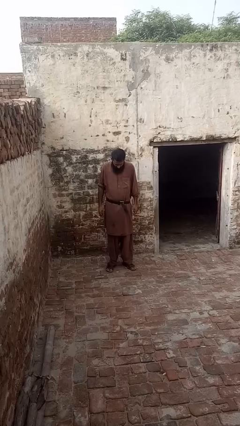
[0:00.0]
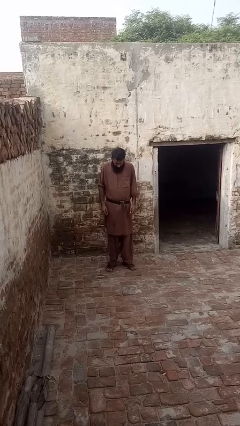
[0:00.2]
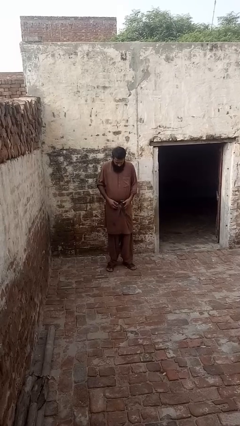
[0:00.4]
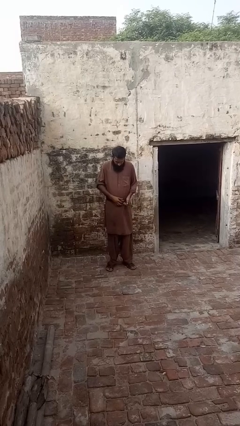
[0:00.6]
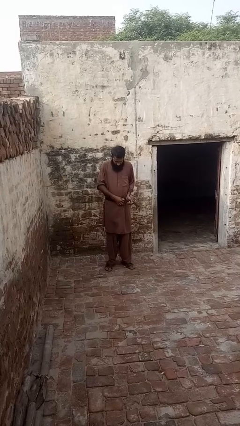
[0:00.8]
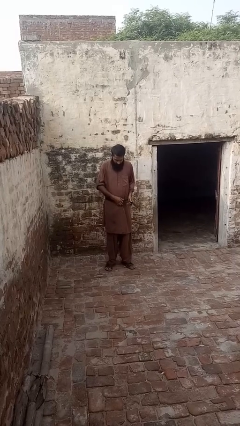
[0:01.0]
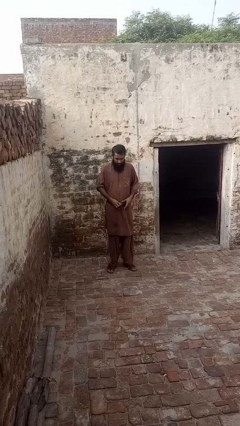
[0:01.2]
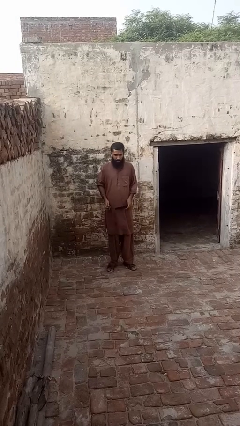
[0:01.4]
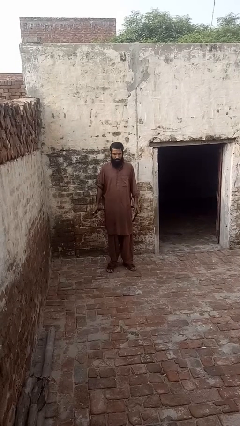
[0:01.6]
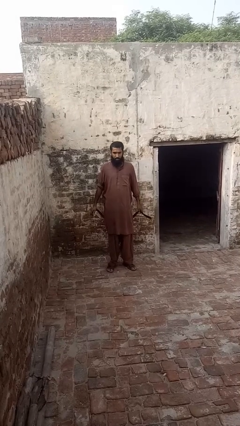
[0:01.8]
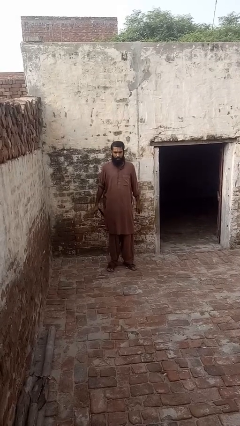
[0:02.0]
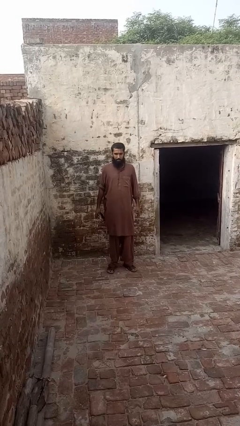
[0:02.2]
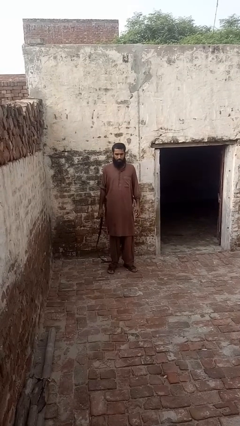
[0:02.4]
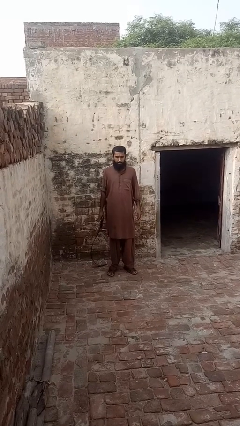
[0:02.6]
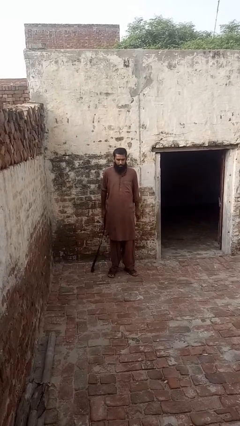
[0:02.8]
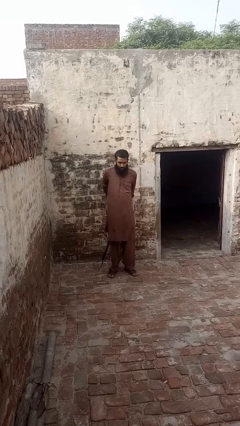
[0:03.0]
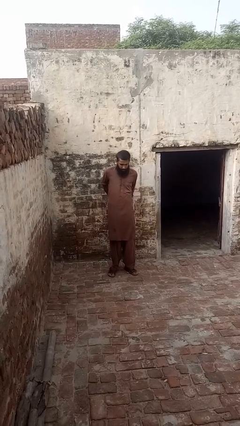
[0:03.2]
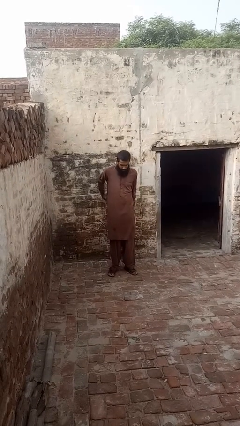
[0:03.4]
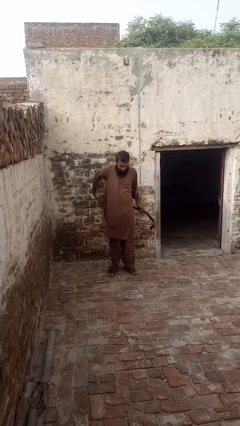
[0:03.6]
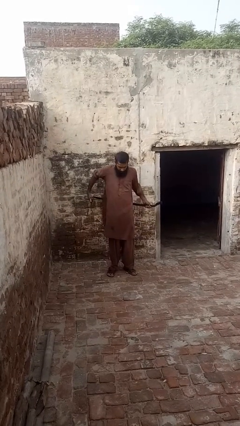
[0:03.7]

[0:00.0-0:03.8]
person takes off belt

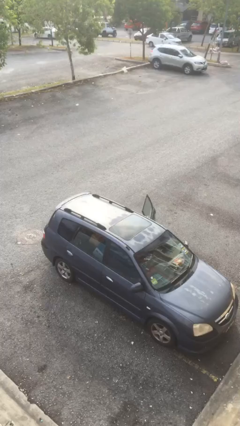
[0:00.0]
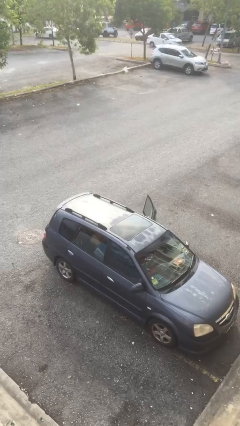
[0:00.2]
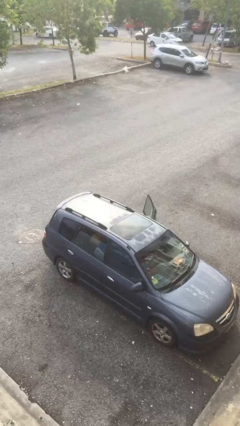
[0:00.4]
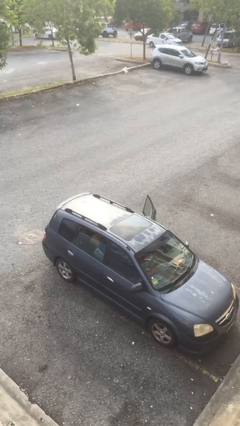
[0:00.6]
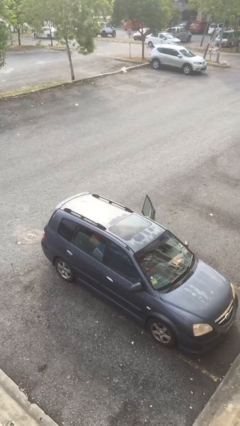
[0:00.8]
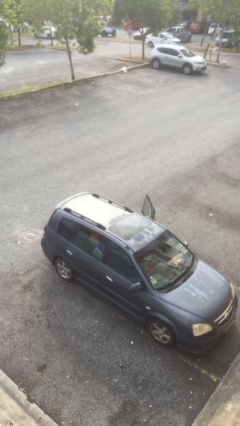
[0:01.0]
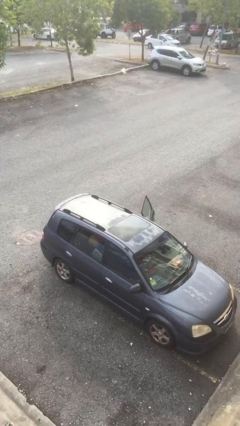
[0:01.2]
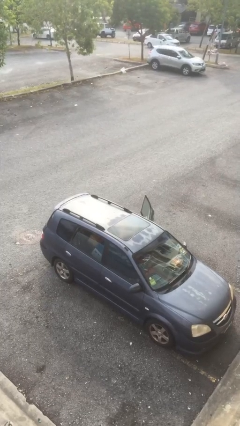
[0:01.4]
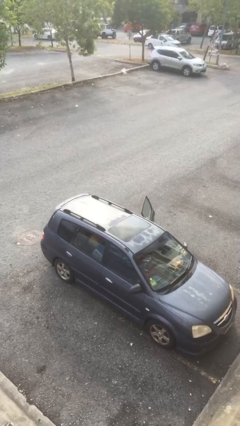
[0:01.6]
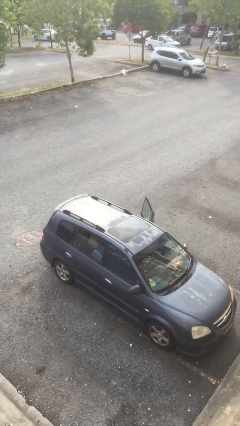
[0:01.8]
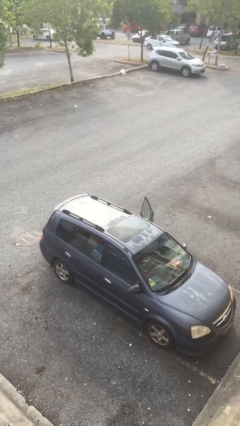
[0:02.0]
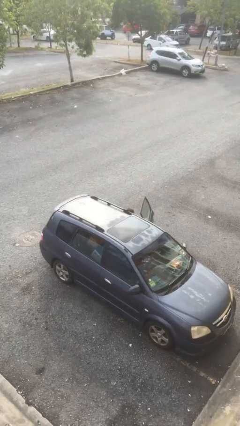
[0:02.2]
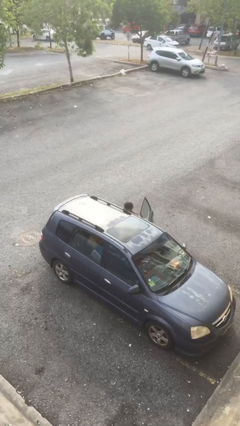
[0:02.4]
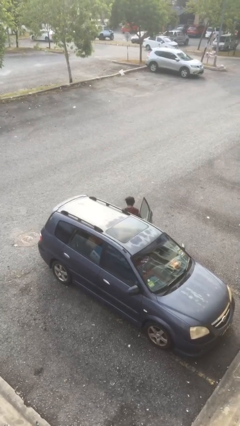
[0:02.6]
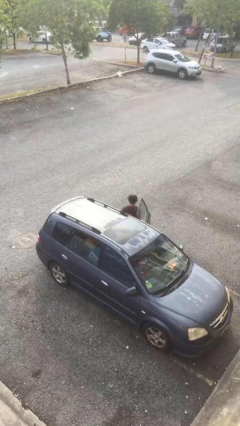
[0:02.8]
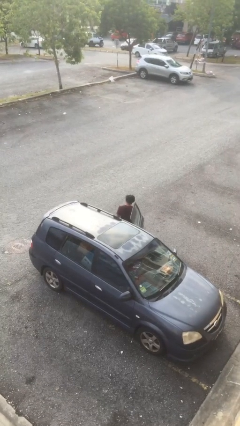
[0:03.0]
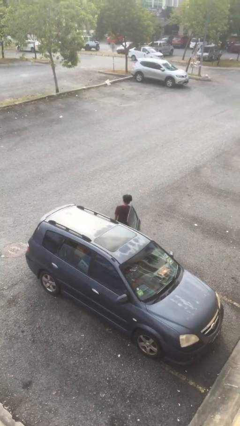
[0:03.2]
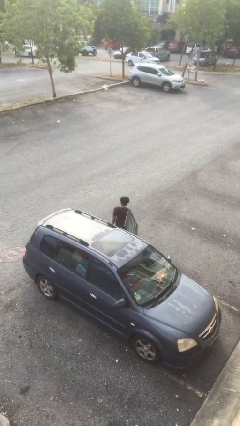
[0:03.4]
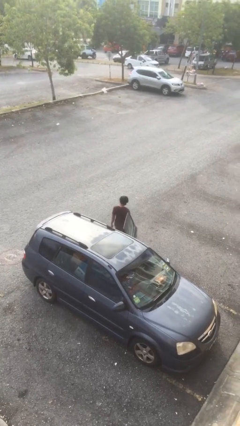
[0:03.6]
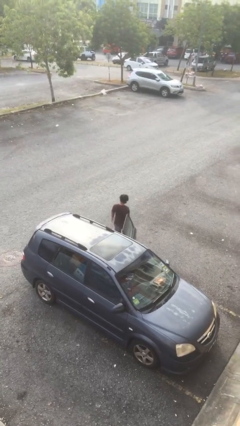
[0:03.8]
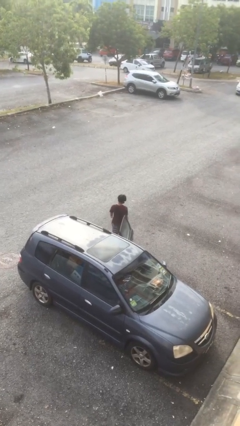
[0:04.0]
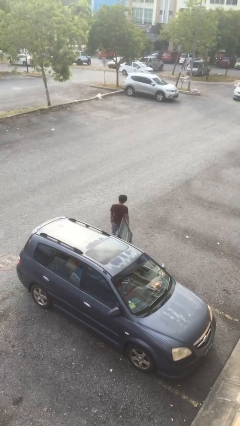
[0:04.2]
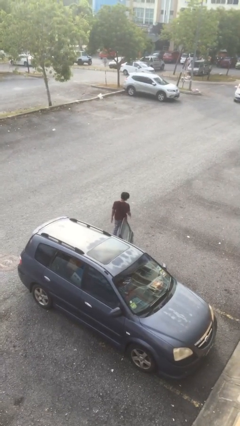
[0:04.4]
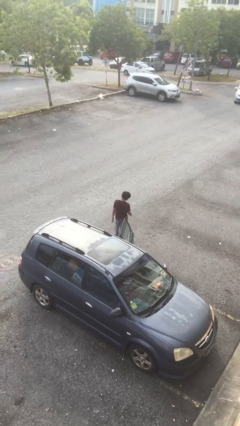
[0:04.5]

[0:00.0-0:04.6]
person exits car

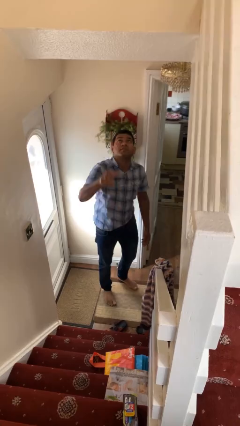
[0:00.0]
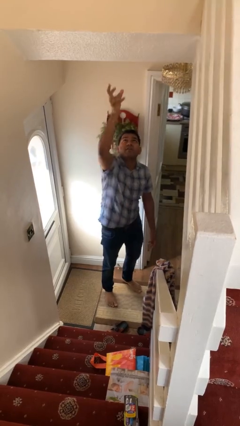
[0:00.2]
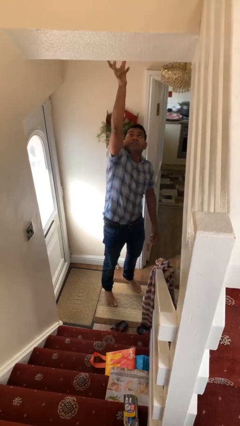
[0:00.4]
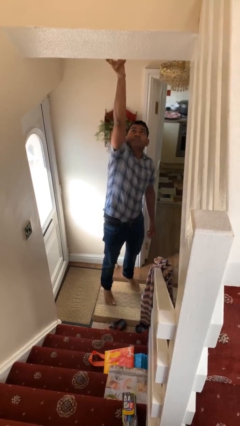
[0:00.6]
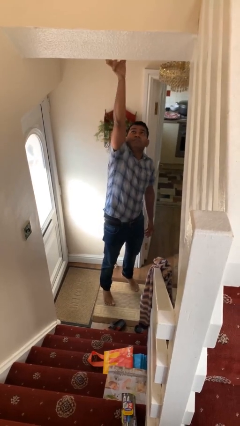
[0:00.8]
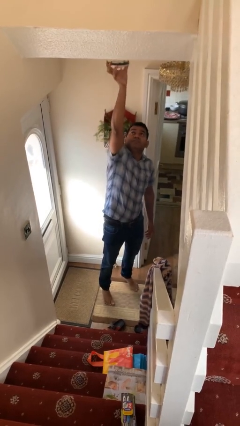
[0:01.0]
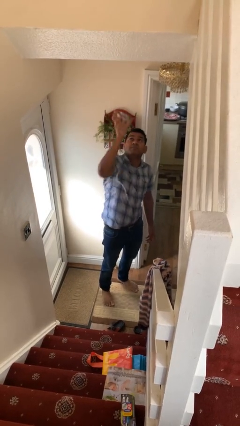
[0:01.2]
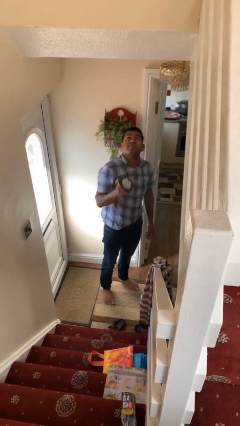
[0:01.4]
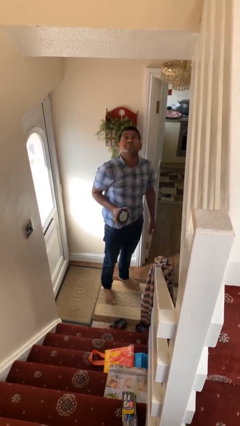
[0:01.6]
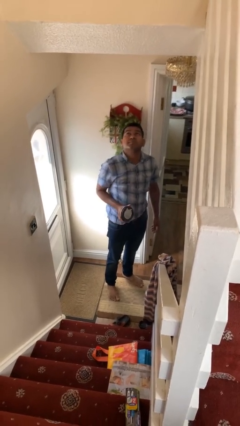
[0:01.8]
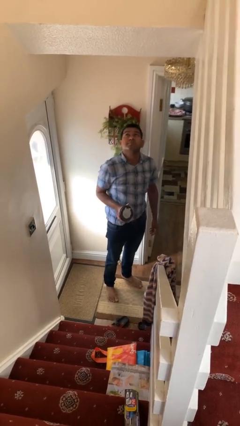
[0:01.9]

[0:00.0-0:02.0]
person takes down smoke detector

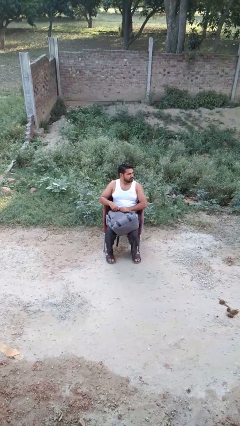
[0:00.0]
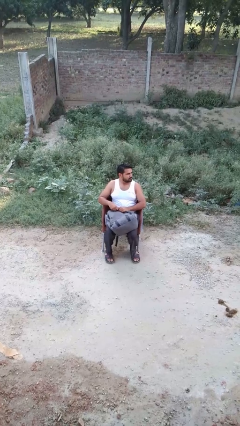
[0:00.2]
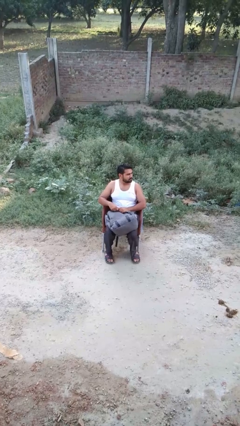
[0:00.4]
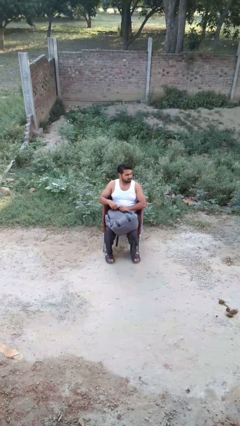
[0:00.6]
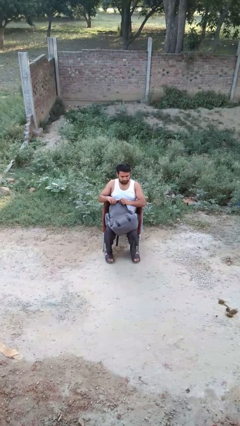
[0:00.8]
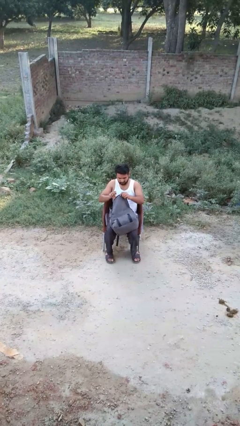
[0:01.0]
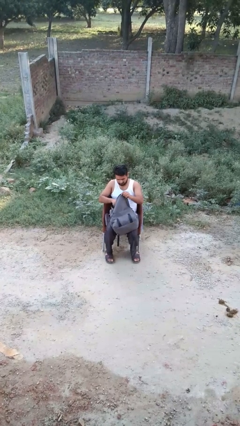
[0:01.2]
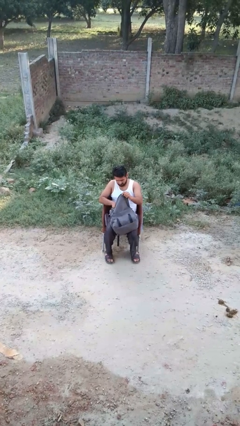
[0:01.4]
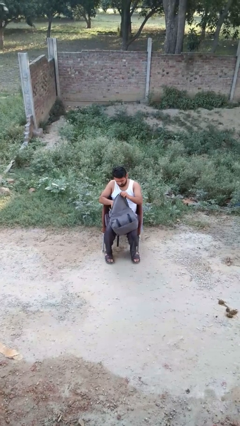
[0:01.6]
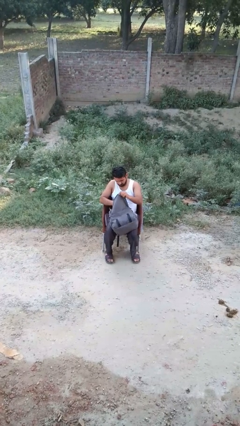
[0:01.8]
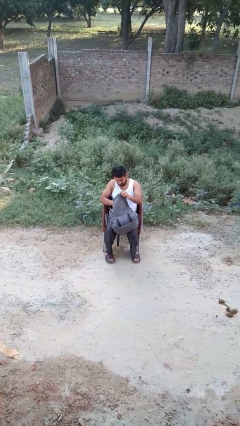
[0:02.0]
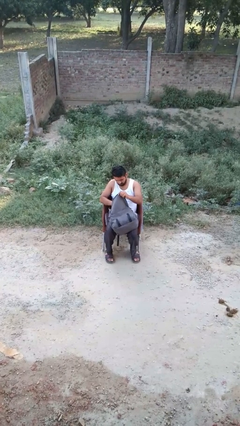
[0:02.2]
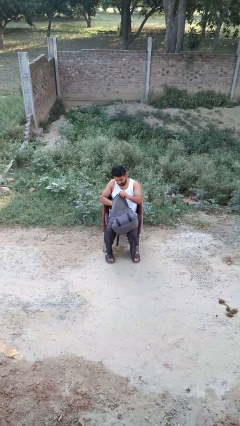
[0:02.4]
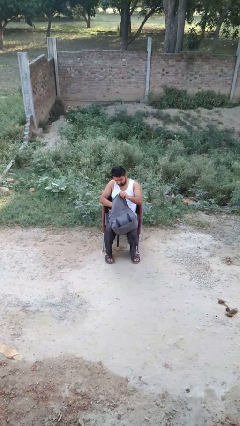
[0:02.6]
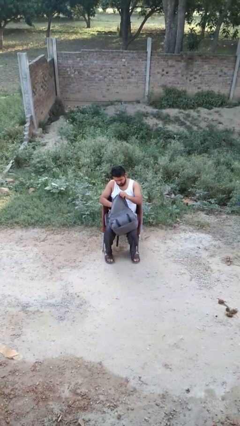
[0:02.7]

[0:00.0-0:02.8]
person searches in backpack

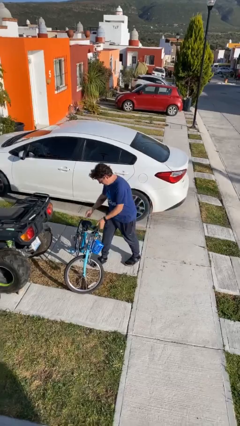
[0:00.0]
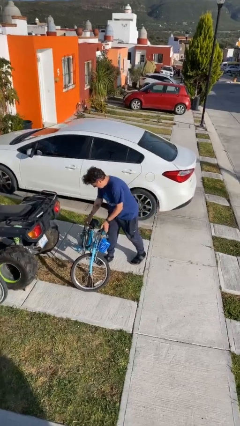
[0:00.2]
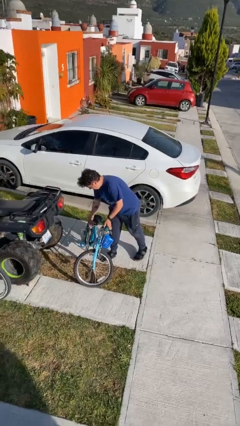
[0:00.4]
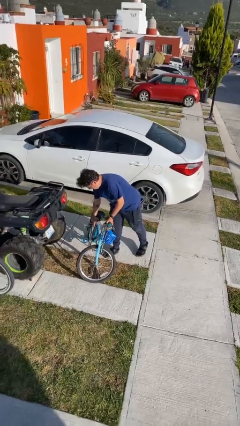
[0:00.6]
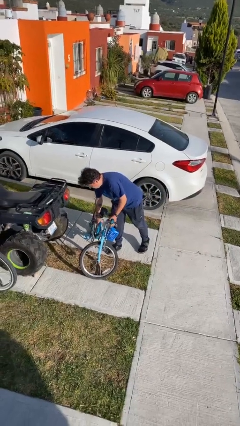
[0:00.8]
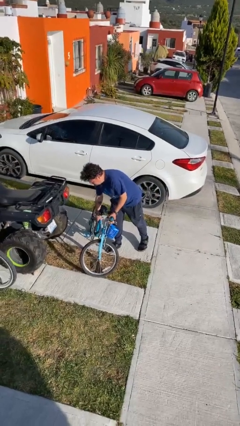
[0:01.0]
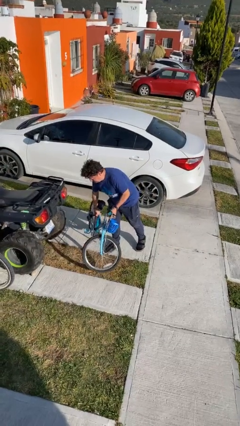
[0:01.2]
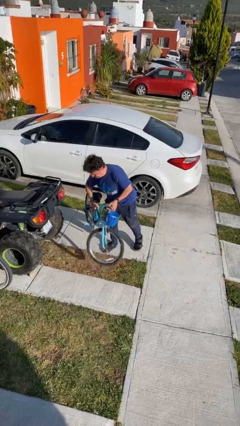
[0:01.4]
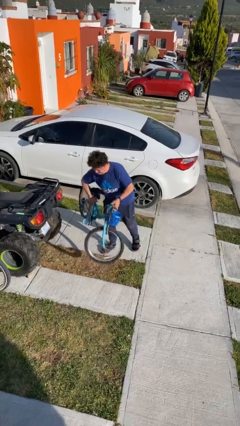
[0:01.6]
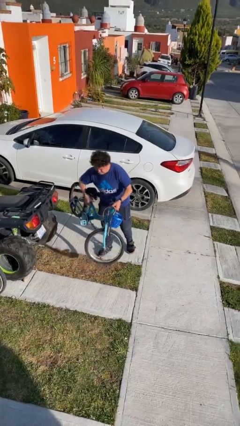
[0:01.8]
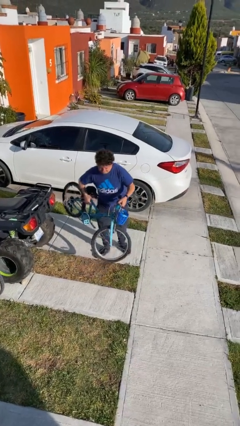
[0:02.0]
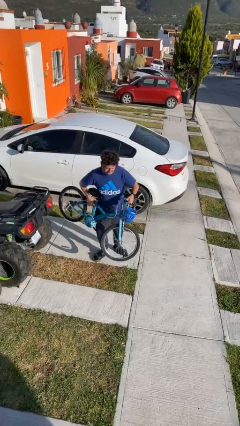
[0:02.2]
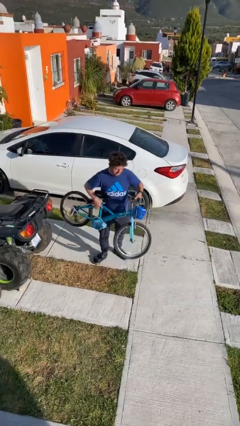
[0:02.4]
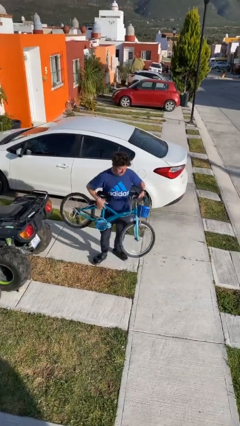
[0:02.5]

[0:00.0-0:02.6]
person picks up object from floor

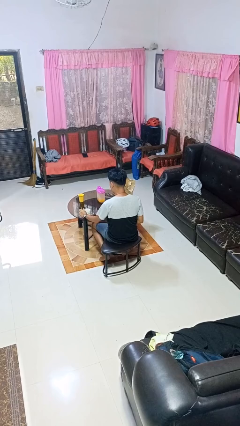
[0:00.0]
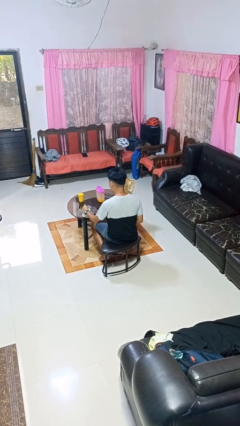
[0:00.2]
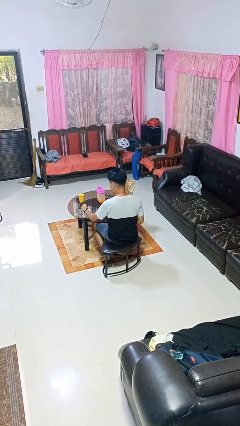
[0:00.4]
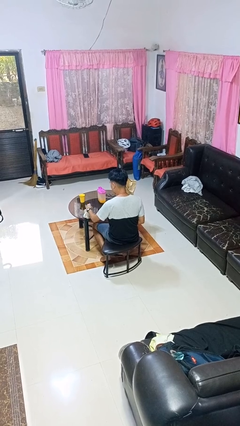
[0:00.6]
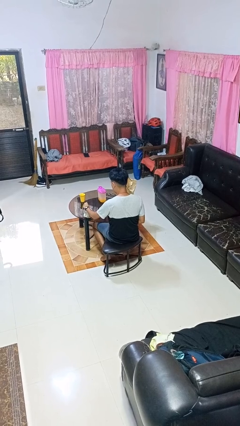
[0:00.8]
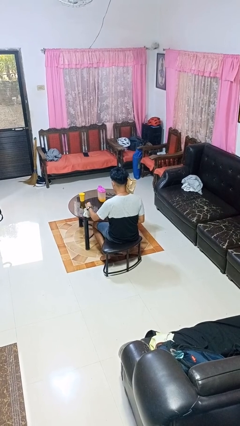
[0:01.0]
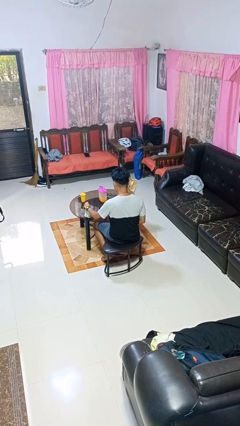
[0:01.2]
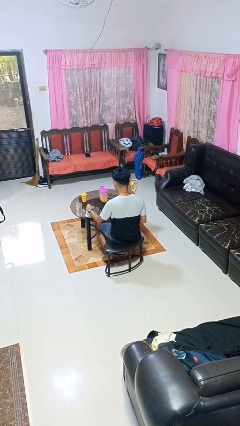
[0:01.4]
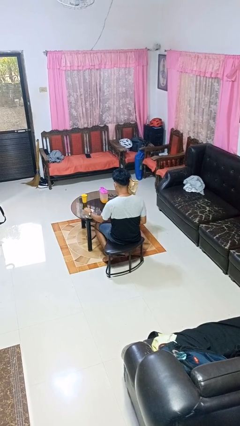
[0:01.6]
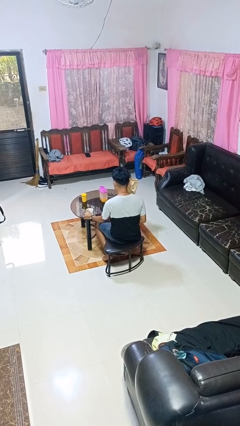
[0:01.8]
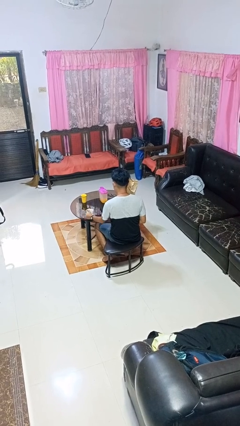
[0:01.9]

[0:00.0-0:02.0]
person stirs mug
